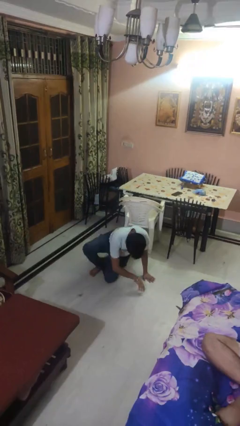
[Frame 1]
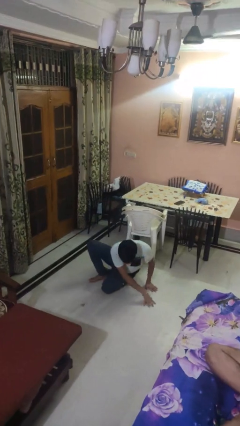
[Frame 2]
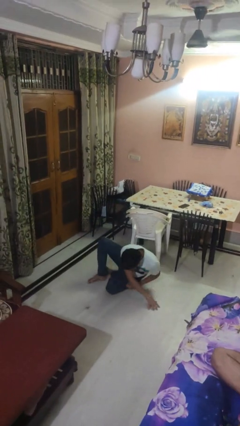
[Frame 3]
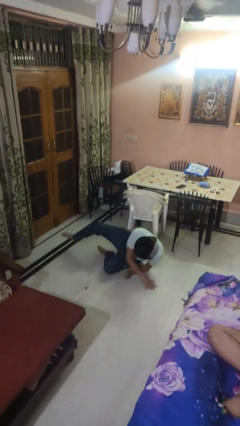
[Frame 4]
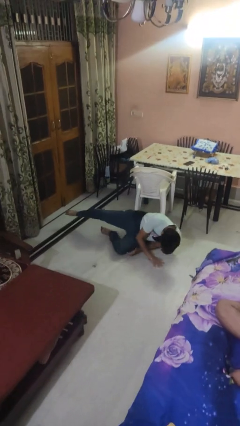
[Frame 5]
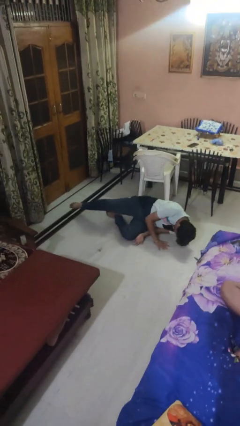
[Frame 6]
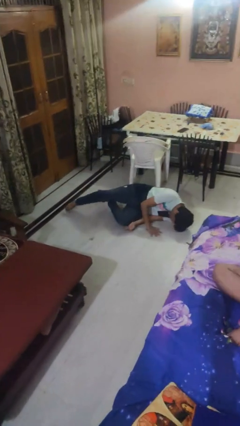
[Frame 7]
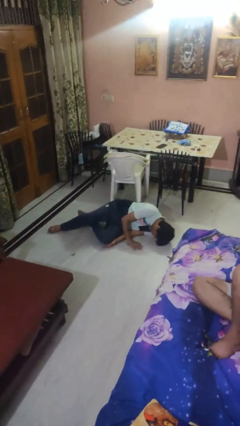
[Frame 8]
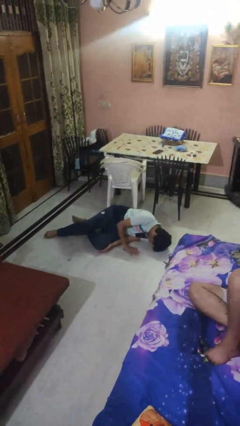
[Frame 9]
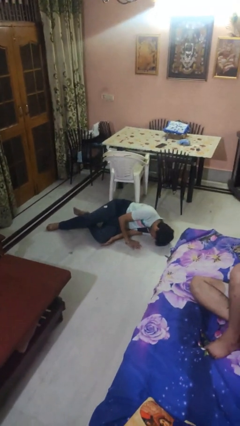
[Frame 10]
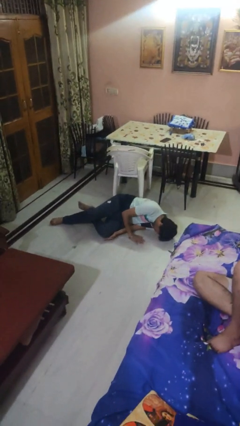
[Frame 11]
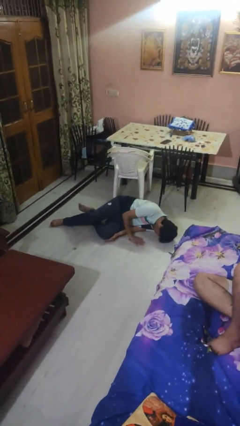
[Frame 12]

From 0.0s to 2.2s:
person lies down on floor

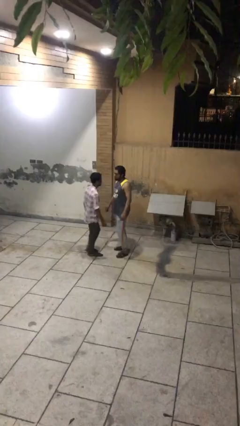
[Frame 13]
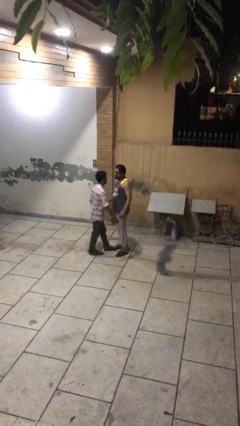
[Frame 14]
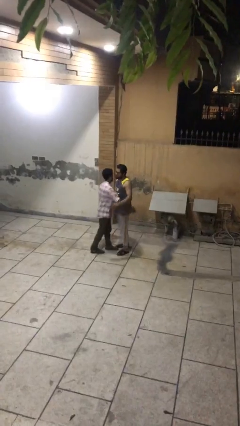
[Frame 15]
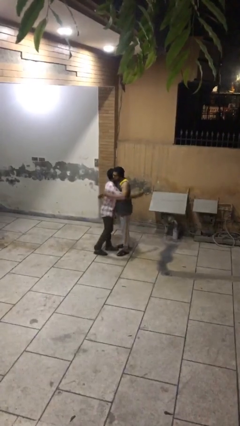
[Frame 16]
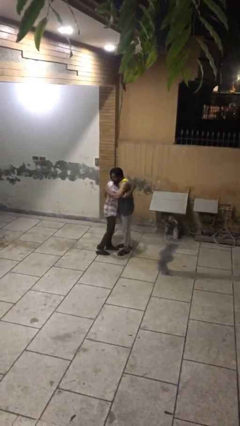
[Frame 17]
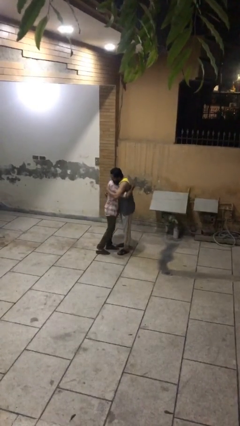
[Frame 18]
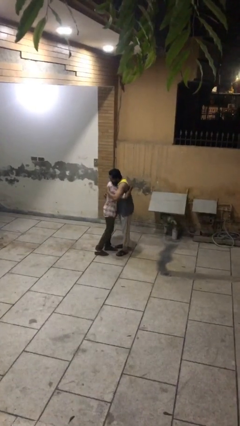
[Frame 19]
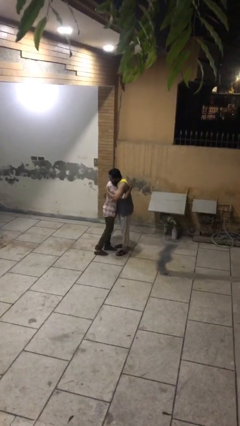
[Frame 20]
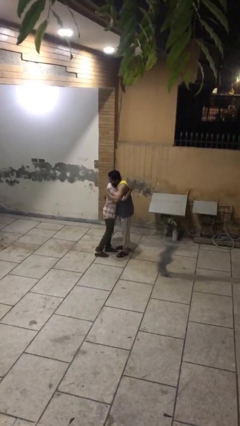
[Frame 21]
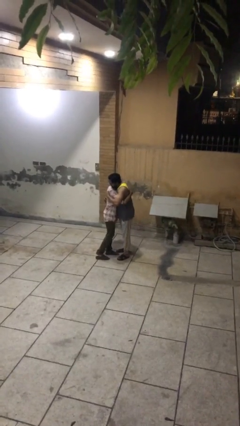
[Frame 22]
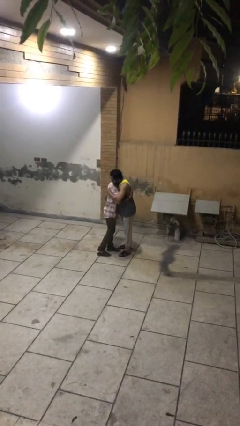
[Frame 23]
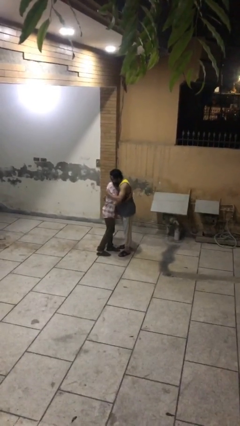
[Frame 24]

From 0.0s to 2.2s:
person embraces person

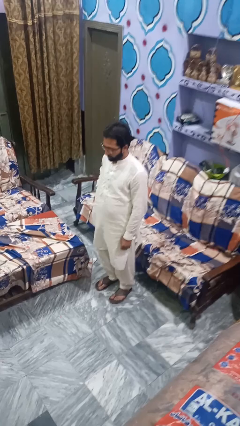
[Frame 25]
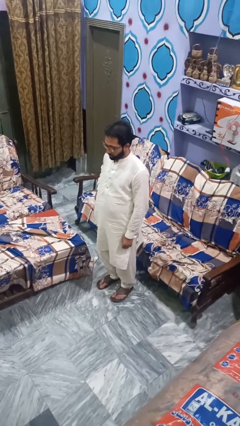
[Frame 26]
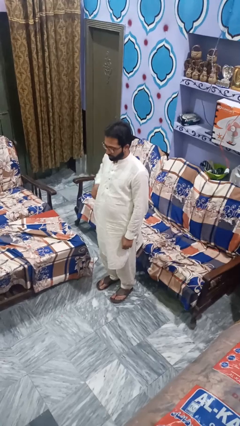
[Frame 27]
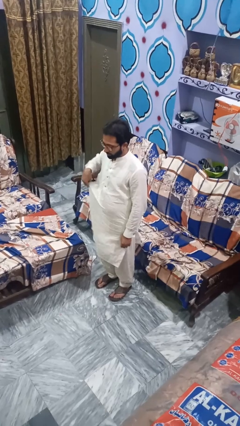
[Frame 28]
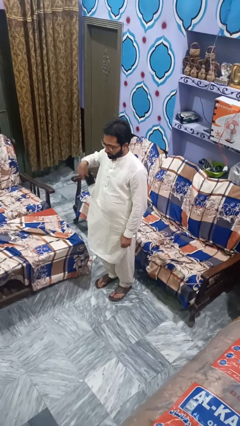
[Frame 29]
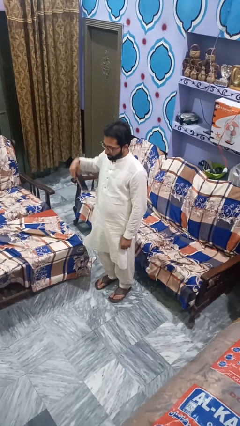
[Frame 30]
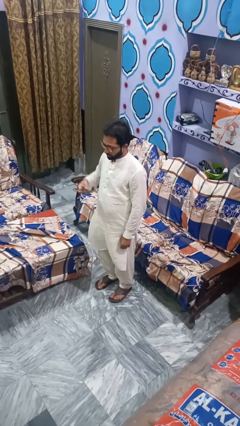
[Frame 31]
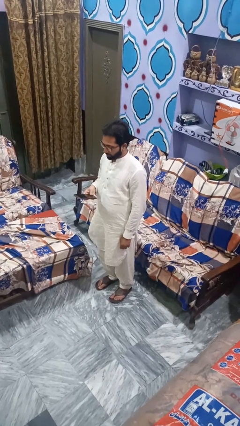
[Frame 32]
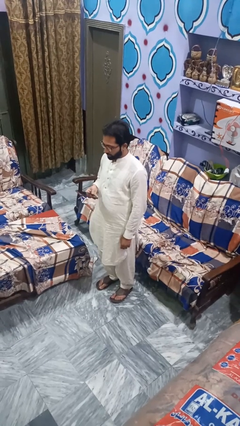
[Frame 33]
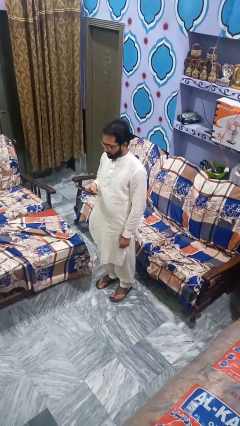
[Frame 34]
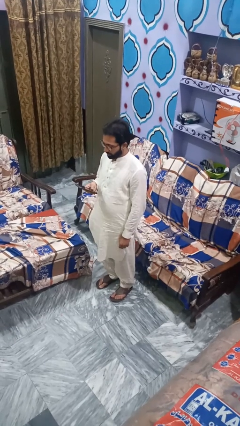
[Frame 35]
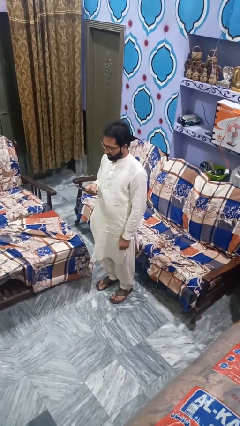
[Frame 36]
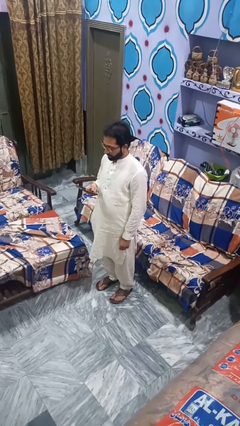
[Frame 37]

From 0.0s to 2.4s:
person takes phone from pocket

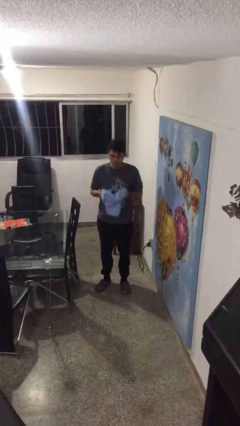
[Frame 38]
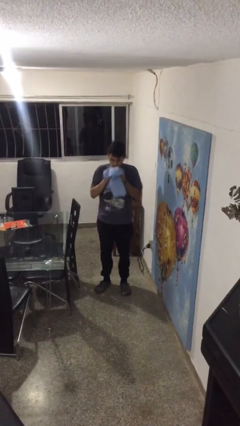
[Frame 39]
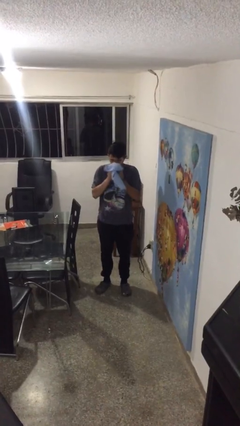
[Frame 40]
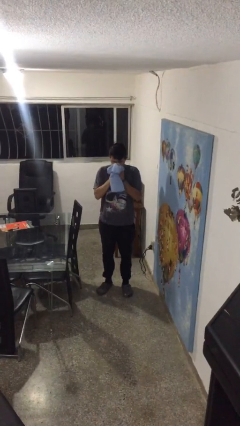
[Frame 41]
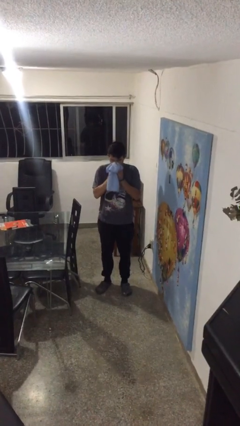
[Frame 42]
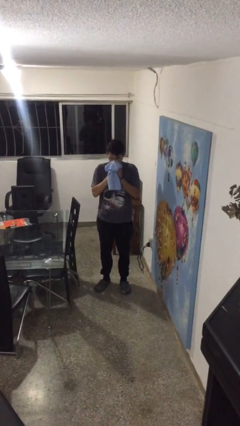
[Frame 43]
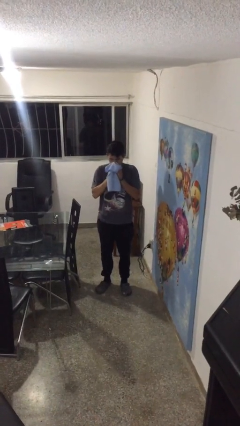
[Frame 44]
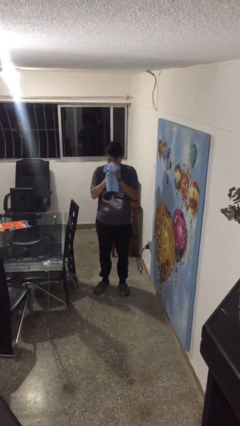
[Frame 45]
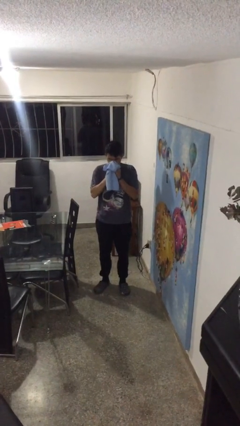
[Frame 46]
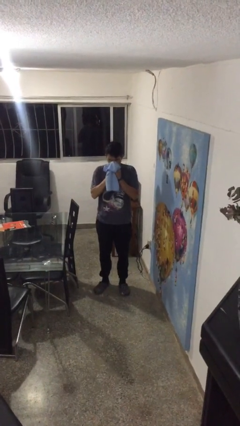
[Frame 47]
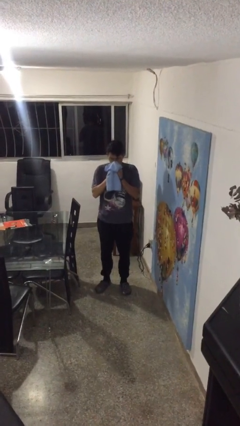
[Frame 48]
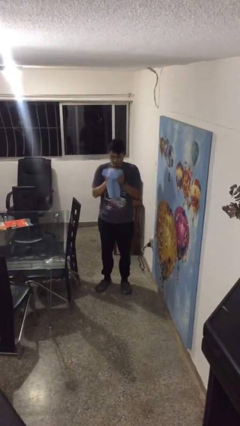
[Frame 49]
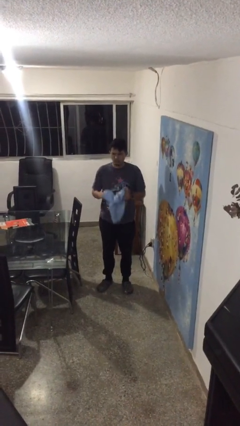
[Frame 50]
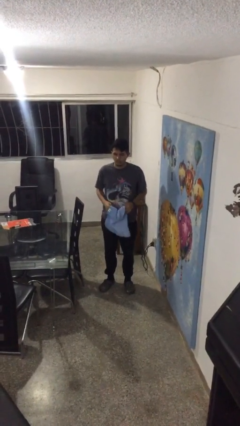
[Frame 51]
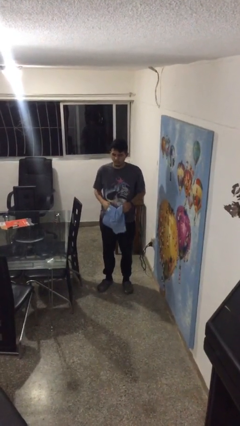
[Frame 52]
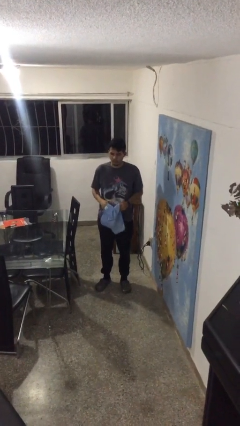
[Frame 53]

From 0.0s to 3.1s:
person blows nose

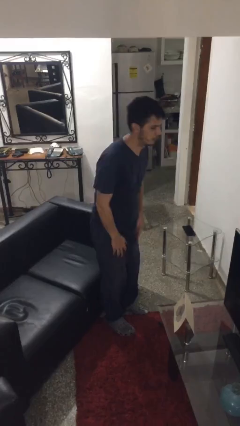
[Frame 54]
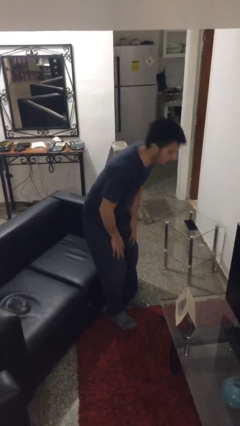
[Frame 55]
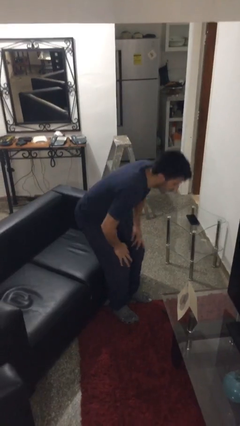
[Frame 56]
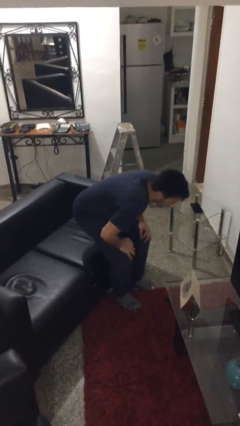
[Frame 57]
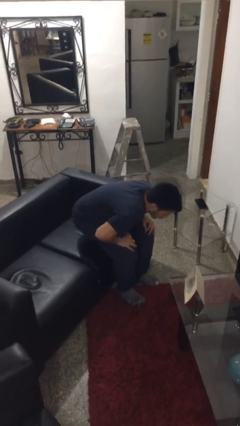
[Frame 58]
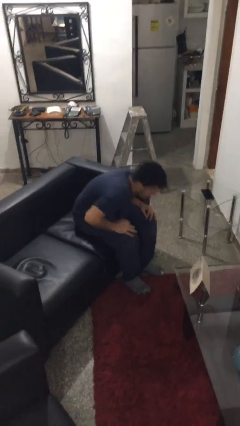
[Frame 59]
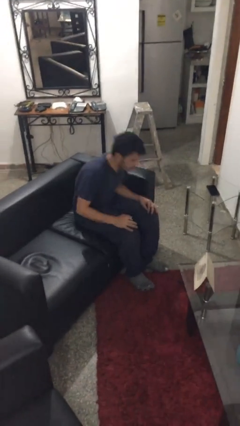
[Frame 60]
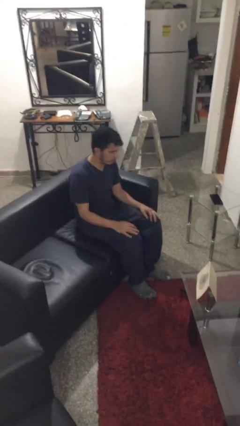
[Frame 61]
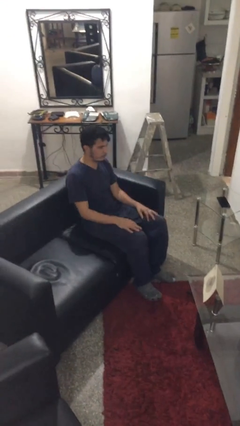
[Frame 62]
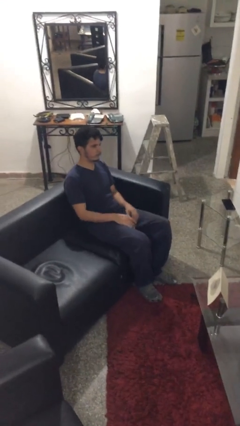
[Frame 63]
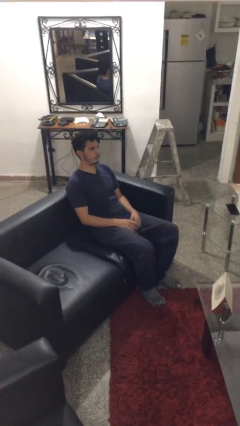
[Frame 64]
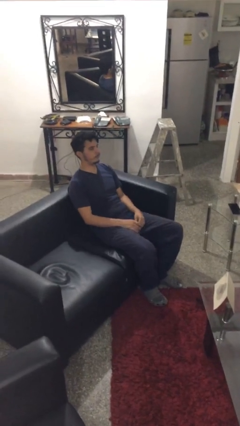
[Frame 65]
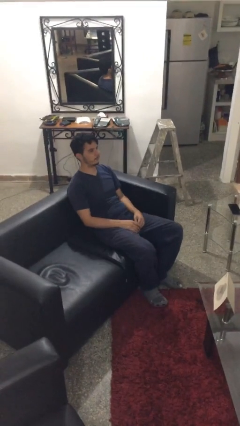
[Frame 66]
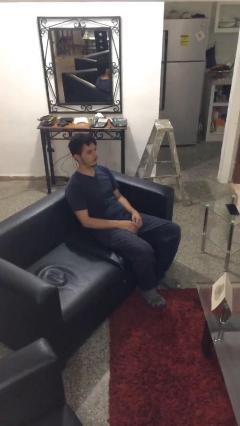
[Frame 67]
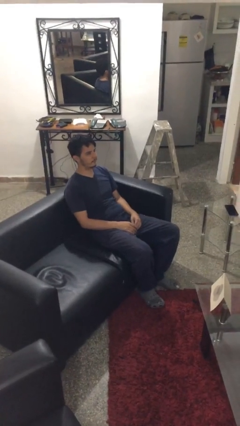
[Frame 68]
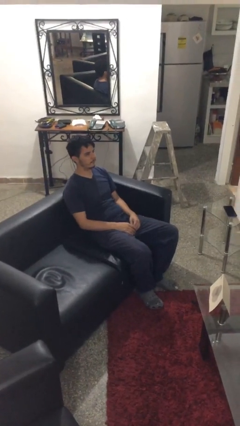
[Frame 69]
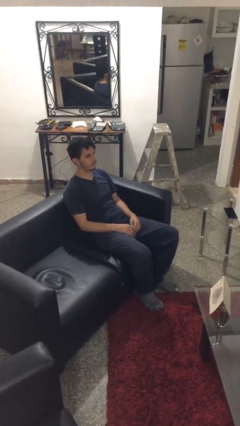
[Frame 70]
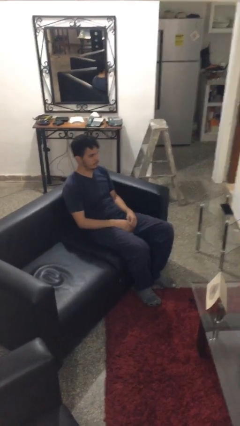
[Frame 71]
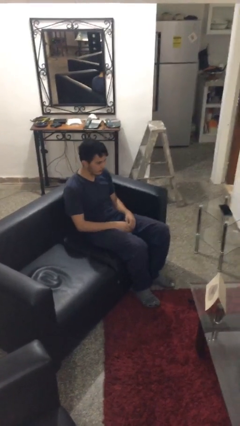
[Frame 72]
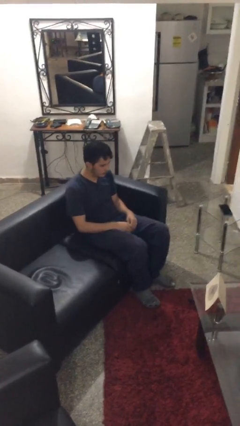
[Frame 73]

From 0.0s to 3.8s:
person lies down on couch

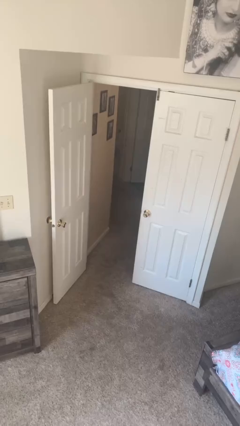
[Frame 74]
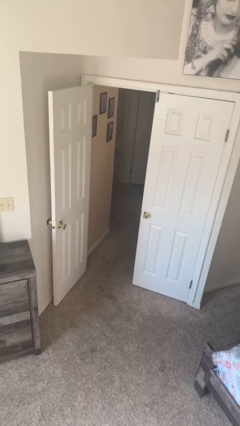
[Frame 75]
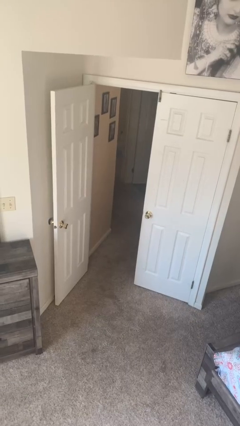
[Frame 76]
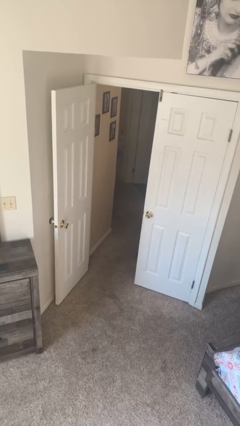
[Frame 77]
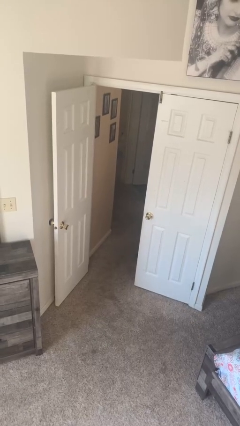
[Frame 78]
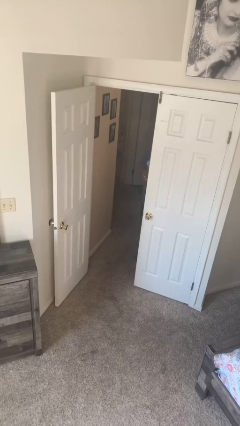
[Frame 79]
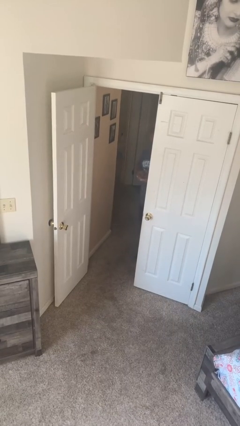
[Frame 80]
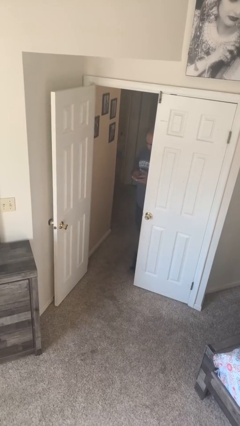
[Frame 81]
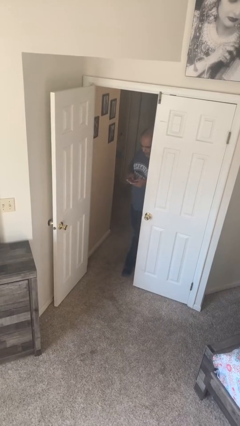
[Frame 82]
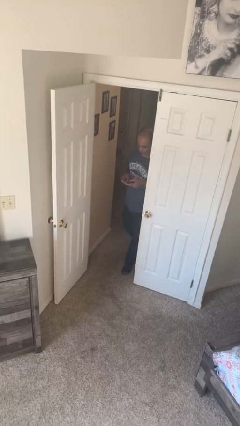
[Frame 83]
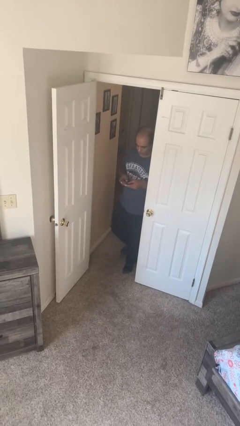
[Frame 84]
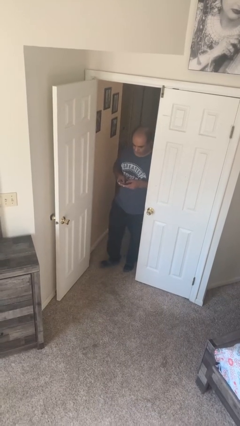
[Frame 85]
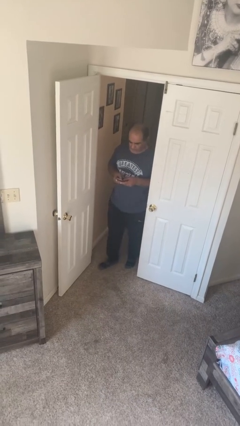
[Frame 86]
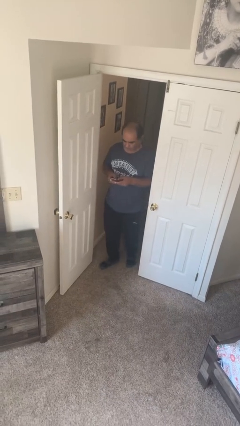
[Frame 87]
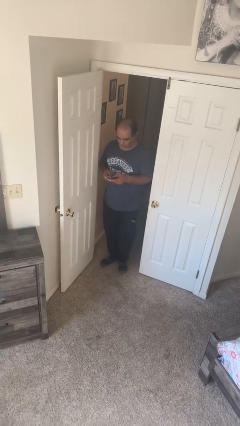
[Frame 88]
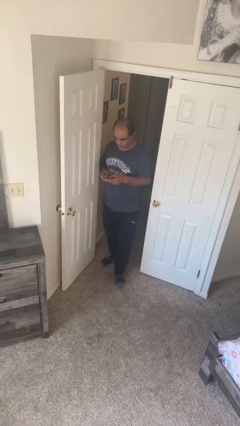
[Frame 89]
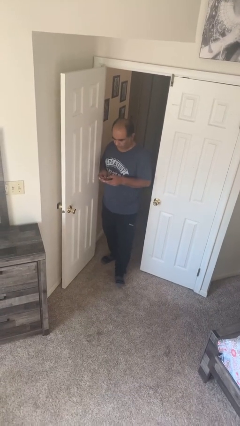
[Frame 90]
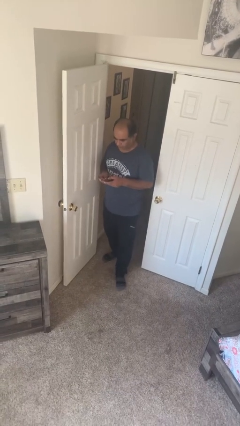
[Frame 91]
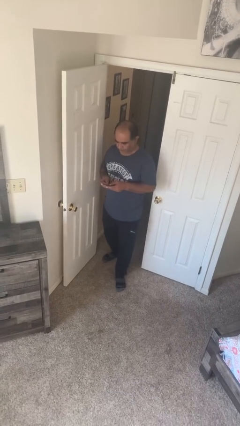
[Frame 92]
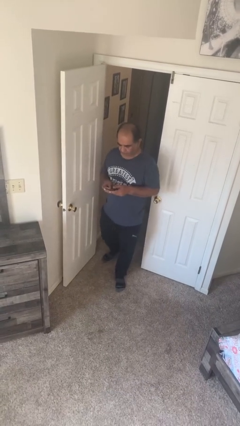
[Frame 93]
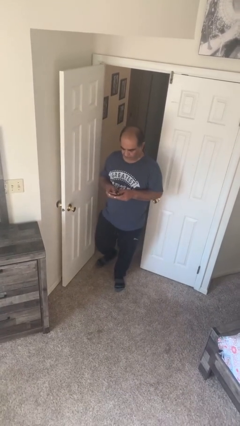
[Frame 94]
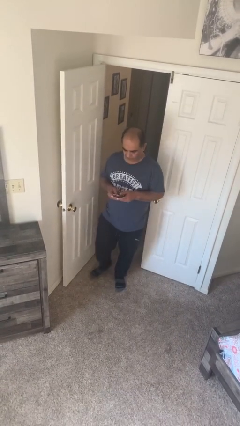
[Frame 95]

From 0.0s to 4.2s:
person enters scene through structure

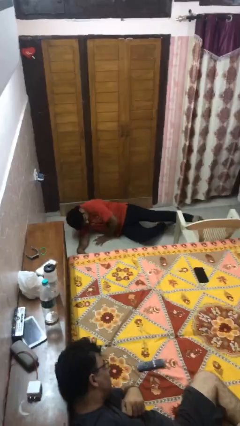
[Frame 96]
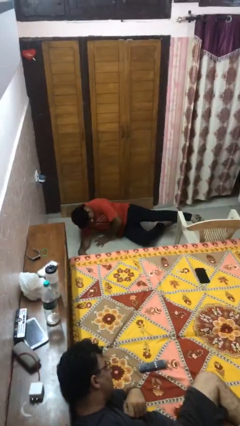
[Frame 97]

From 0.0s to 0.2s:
person stands up from floor
